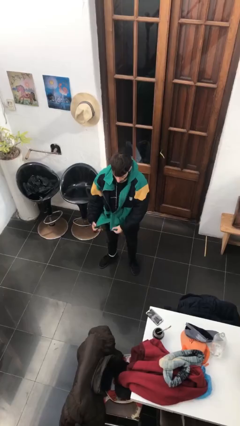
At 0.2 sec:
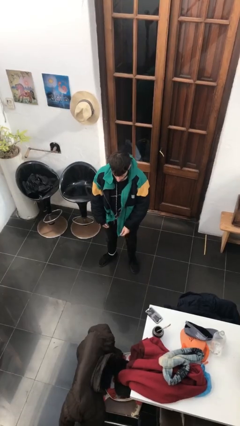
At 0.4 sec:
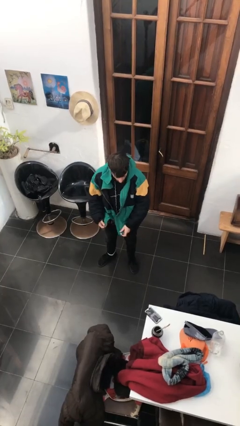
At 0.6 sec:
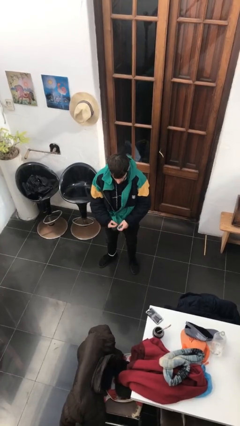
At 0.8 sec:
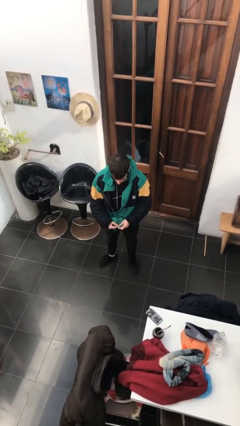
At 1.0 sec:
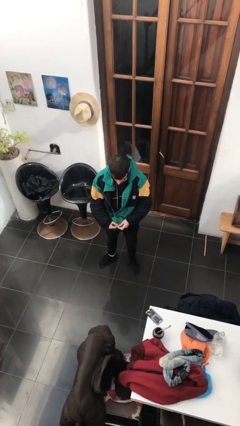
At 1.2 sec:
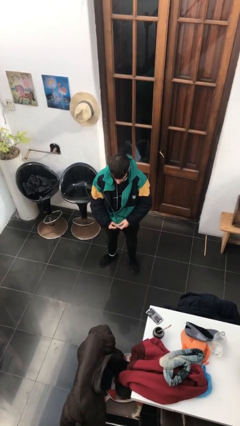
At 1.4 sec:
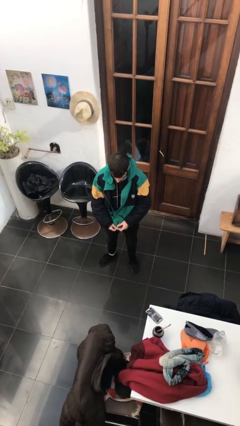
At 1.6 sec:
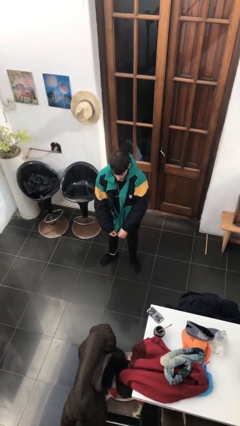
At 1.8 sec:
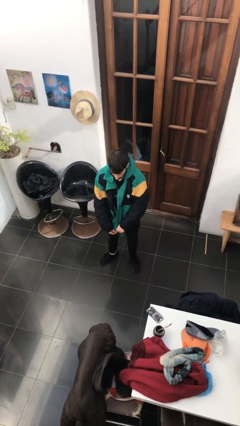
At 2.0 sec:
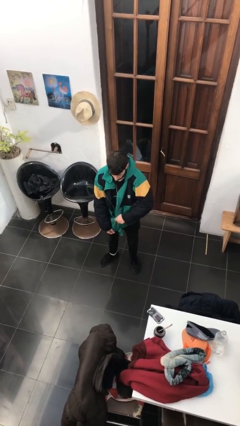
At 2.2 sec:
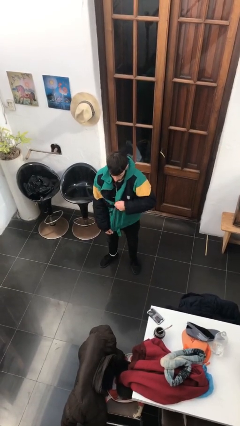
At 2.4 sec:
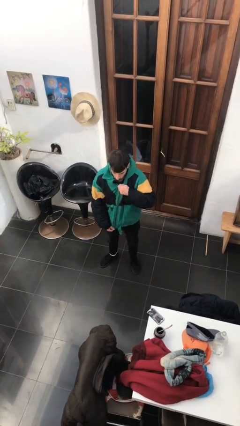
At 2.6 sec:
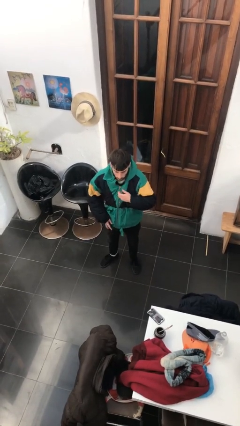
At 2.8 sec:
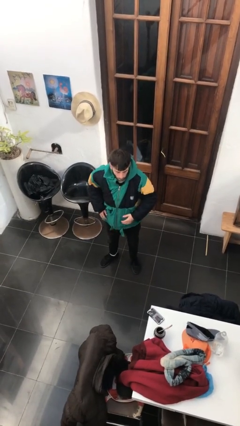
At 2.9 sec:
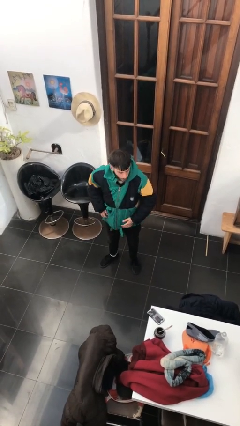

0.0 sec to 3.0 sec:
person zips up jacket

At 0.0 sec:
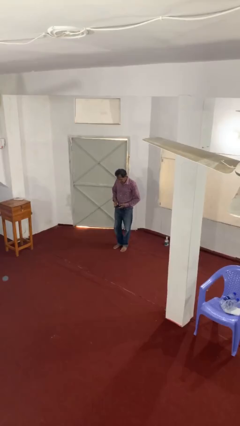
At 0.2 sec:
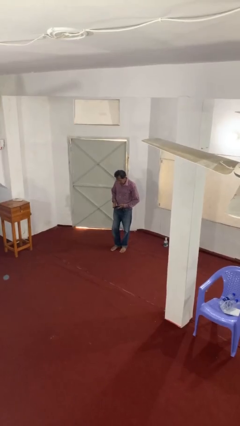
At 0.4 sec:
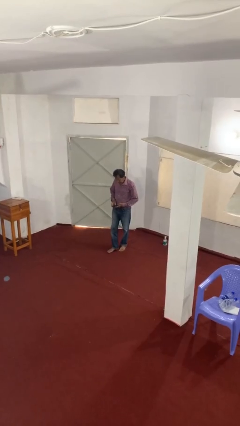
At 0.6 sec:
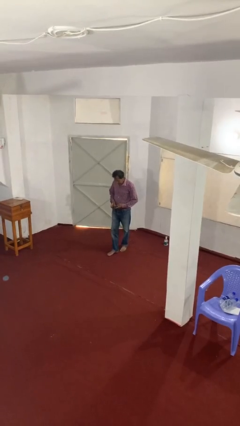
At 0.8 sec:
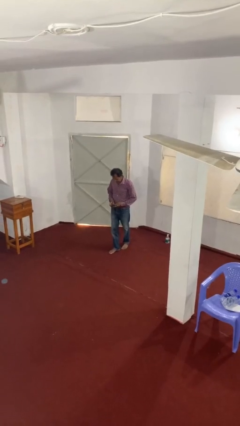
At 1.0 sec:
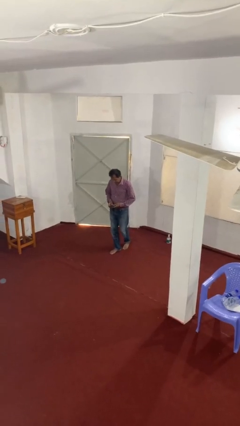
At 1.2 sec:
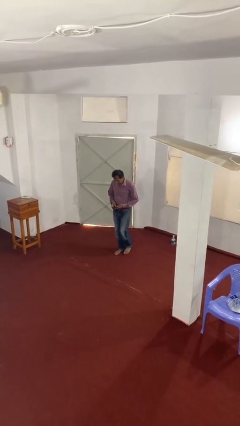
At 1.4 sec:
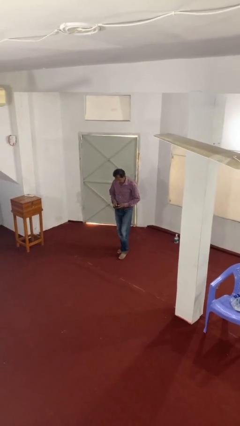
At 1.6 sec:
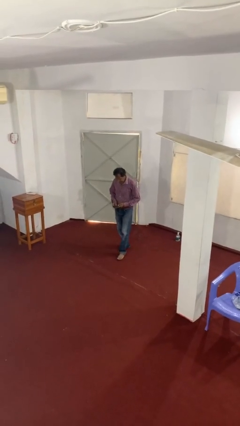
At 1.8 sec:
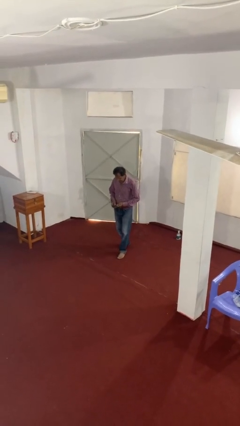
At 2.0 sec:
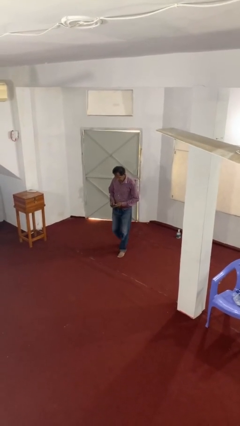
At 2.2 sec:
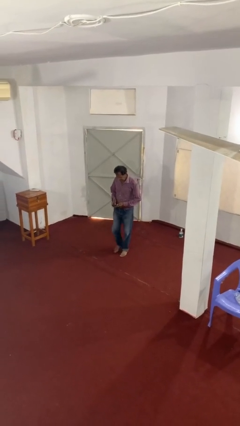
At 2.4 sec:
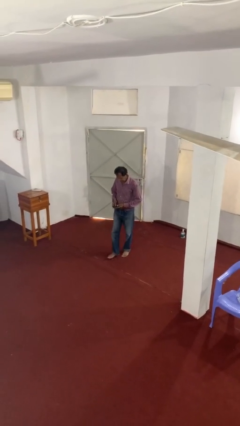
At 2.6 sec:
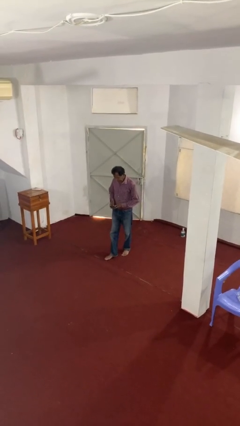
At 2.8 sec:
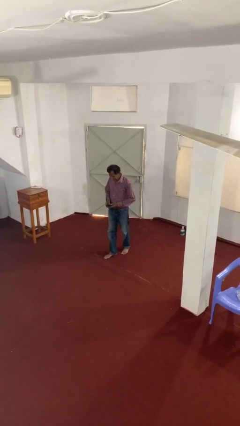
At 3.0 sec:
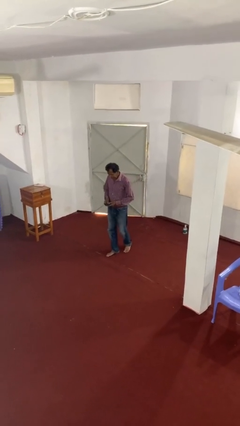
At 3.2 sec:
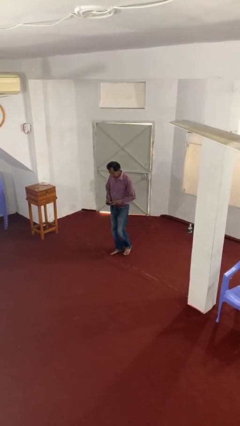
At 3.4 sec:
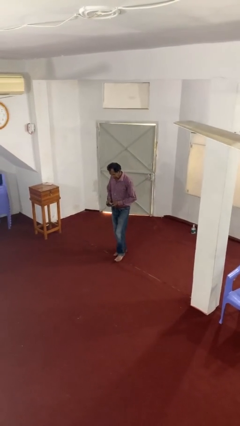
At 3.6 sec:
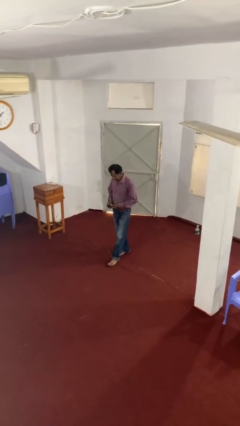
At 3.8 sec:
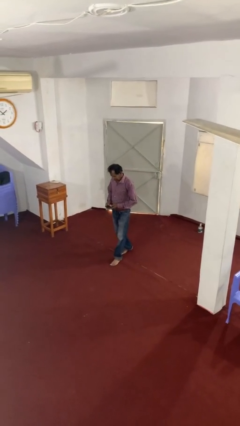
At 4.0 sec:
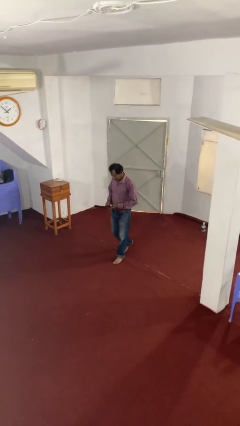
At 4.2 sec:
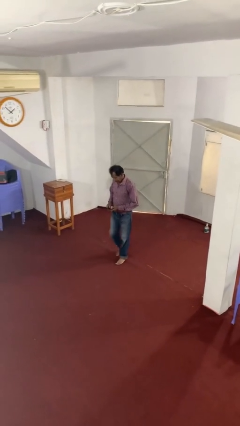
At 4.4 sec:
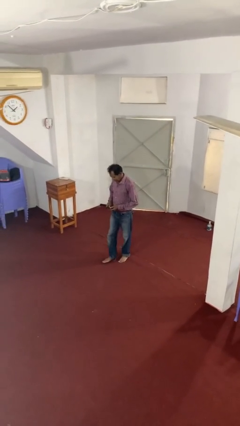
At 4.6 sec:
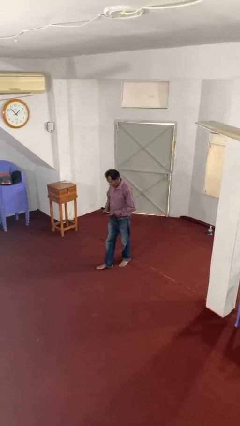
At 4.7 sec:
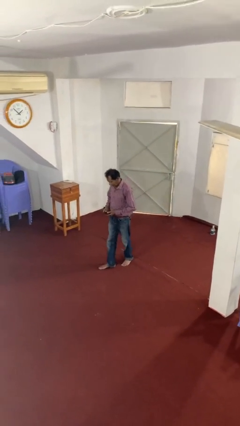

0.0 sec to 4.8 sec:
person texts on phone

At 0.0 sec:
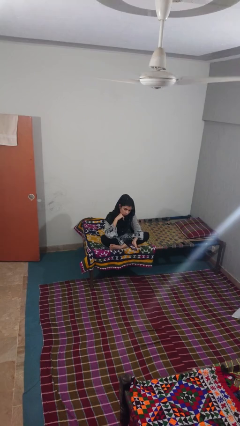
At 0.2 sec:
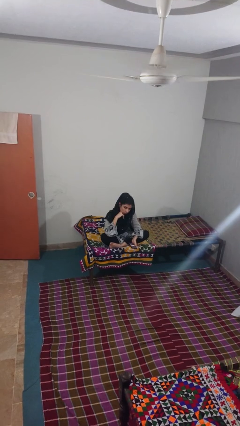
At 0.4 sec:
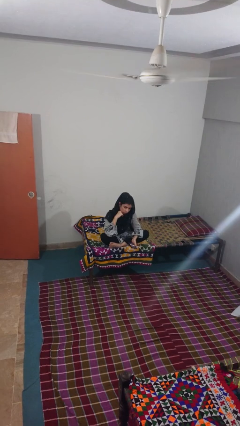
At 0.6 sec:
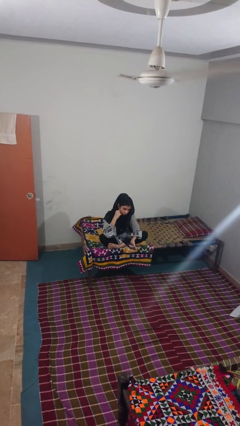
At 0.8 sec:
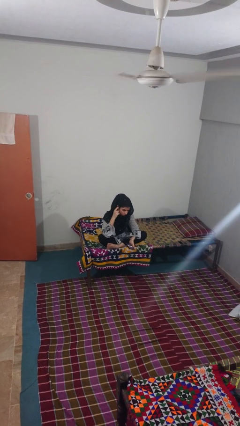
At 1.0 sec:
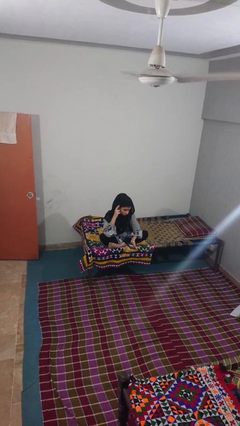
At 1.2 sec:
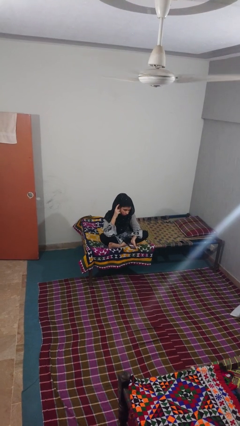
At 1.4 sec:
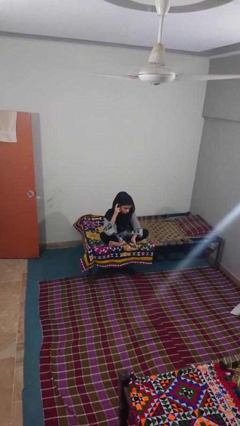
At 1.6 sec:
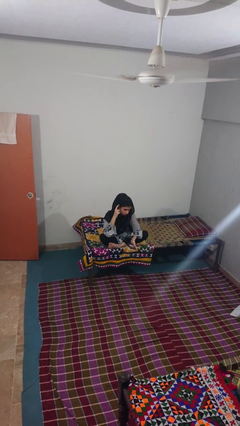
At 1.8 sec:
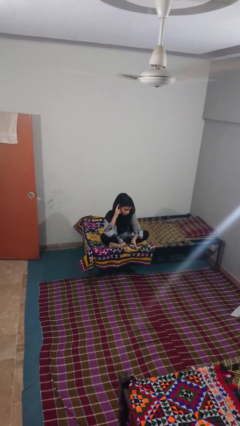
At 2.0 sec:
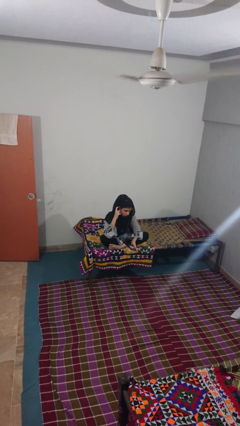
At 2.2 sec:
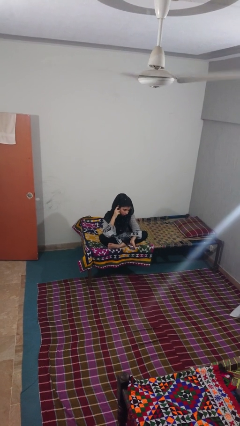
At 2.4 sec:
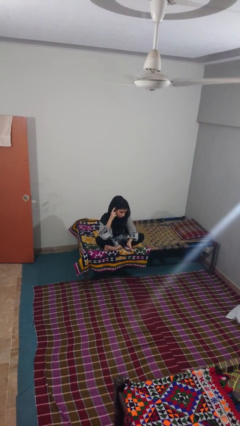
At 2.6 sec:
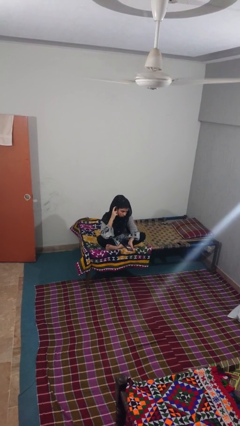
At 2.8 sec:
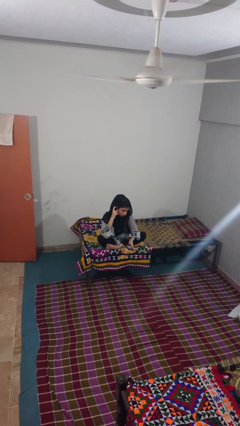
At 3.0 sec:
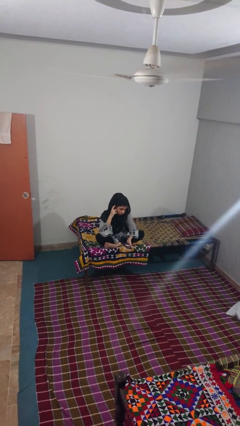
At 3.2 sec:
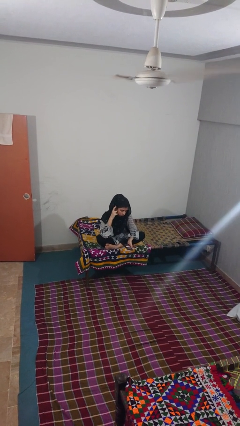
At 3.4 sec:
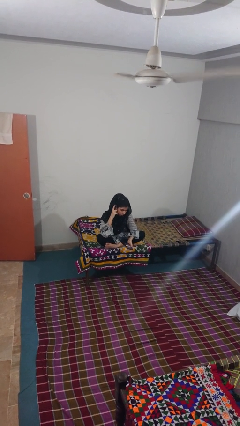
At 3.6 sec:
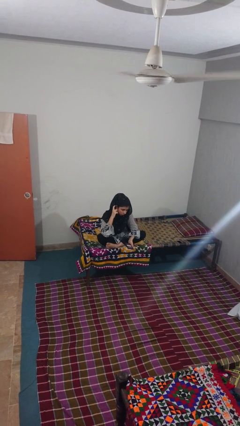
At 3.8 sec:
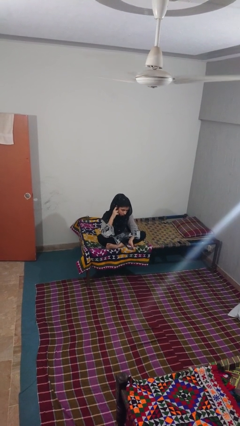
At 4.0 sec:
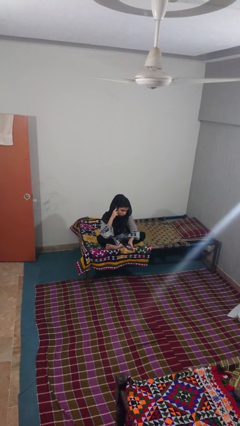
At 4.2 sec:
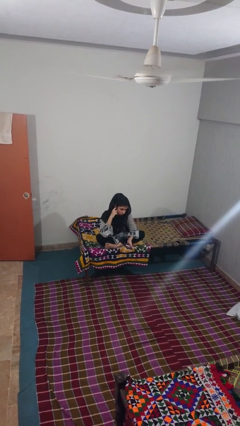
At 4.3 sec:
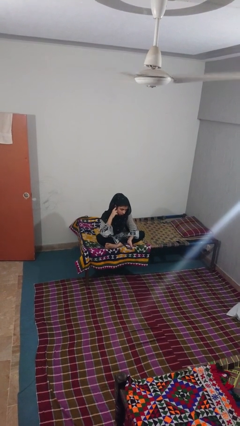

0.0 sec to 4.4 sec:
person touches earlobe

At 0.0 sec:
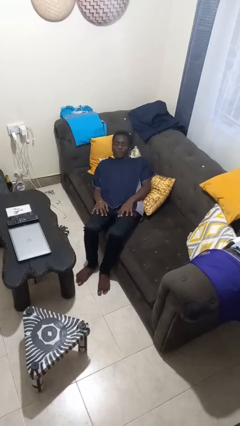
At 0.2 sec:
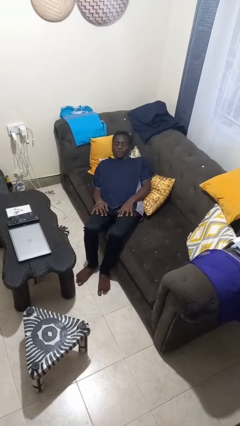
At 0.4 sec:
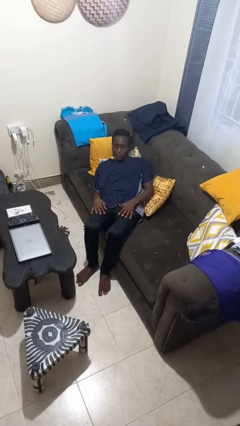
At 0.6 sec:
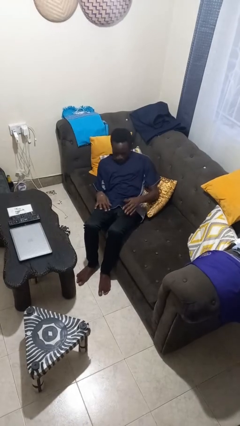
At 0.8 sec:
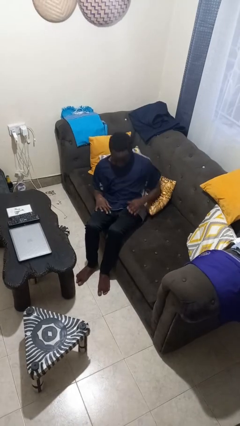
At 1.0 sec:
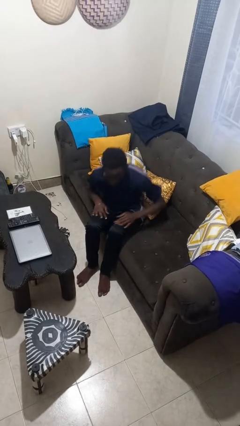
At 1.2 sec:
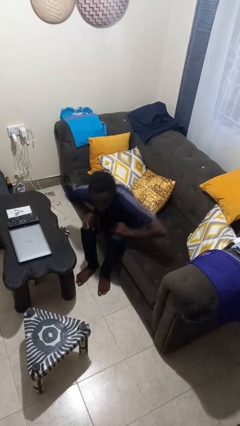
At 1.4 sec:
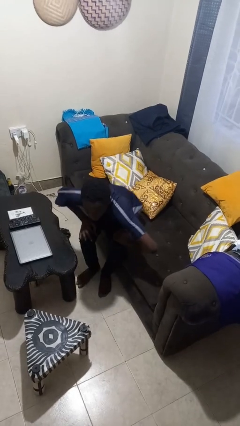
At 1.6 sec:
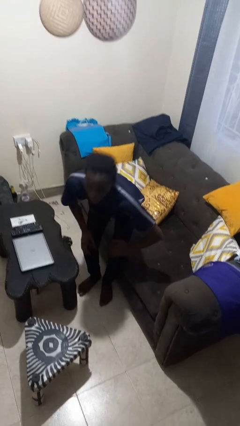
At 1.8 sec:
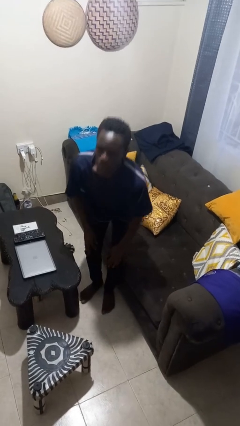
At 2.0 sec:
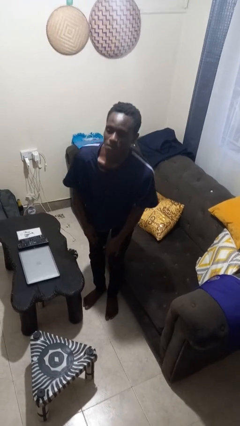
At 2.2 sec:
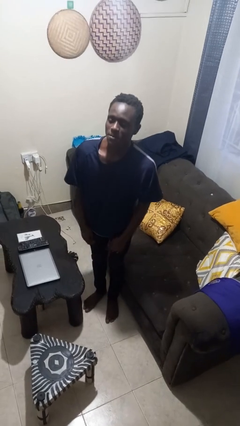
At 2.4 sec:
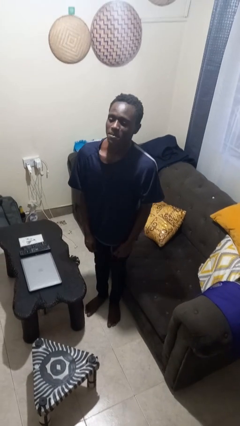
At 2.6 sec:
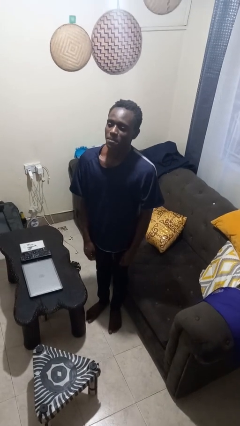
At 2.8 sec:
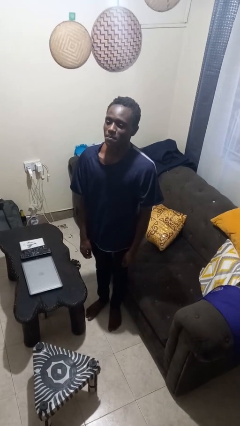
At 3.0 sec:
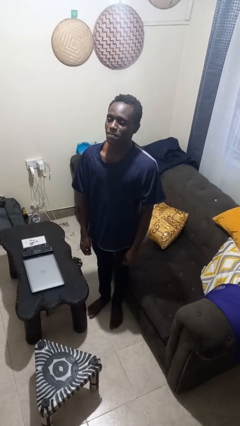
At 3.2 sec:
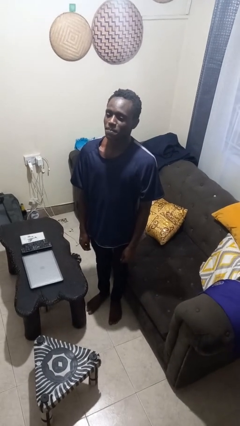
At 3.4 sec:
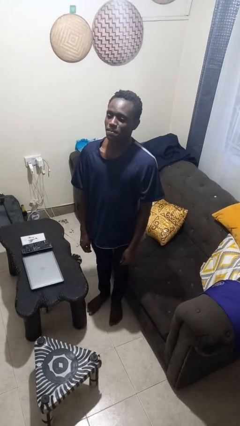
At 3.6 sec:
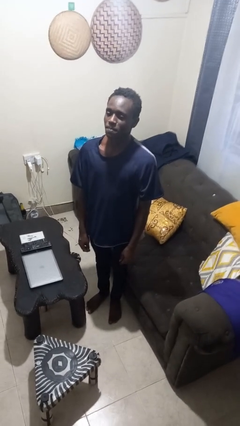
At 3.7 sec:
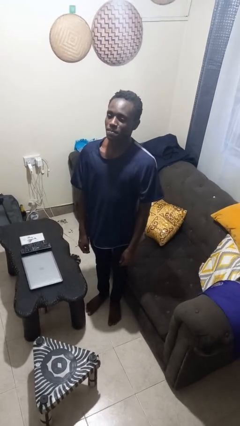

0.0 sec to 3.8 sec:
person stands up

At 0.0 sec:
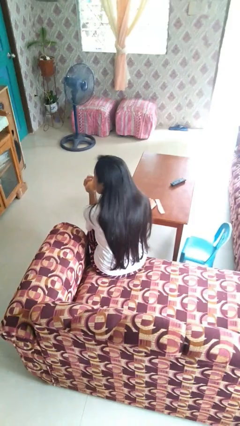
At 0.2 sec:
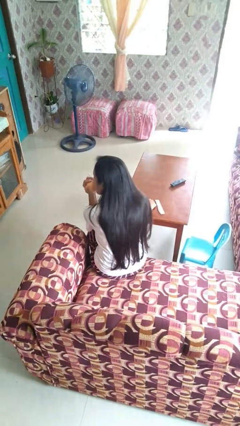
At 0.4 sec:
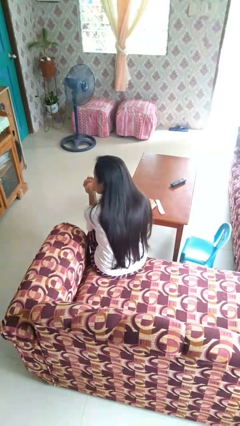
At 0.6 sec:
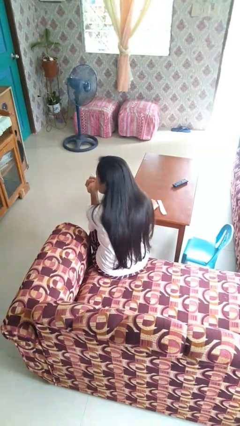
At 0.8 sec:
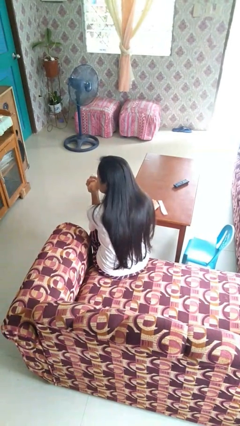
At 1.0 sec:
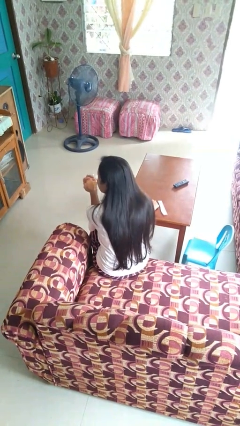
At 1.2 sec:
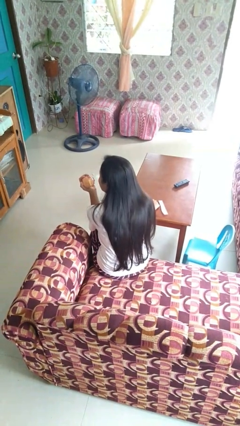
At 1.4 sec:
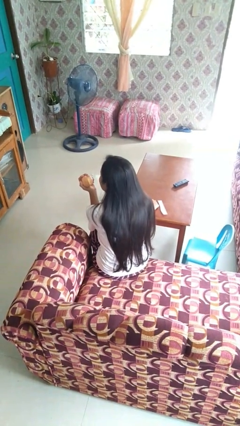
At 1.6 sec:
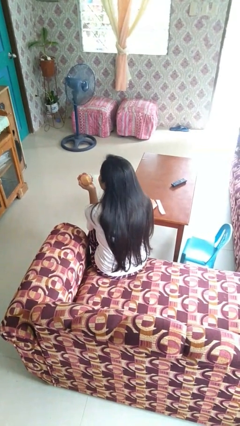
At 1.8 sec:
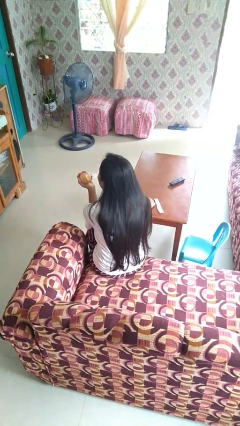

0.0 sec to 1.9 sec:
person eats apple
